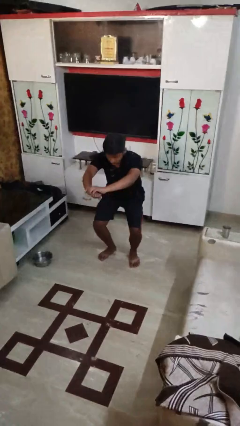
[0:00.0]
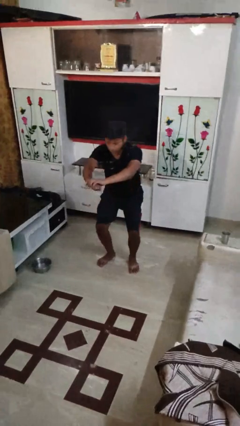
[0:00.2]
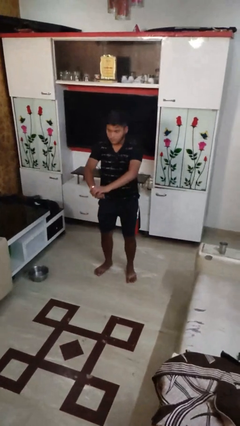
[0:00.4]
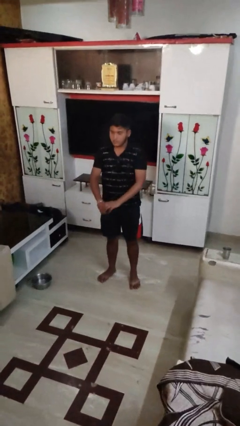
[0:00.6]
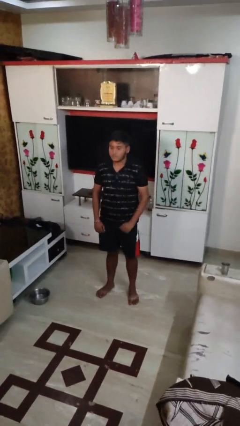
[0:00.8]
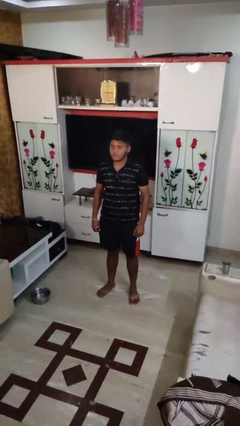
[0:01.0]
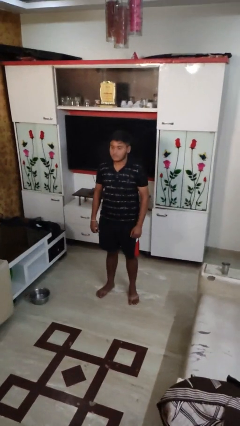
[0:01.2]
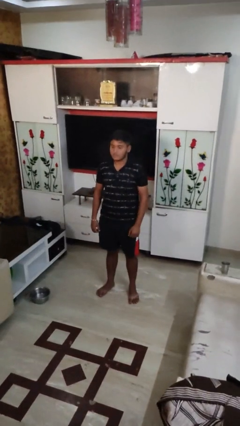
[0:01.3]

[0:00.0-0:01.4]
person stands up

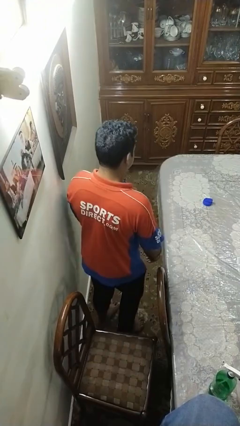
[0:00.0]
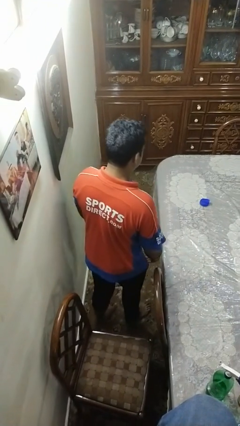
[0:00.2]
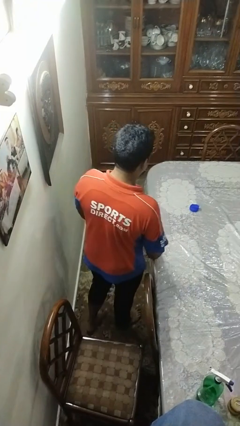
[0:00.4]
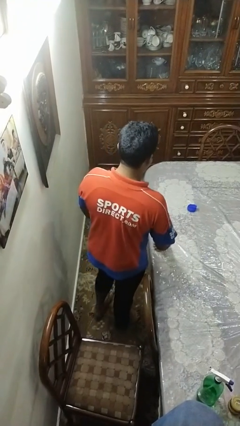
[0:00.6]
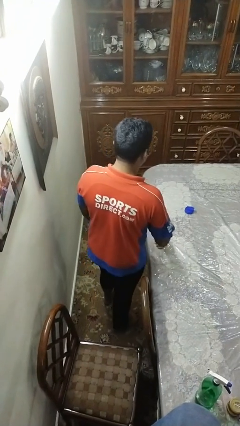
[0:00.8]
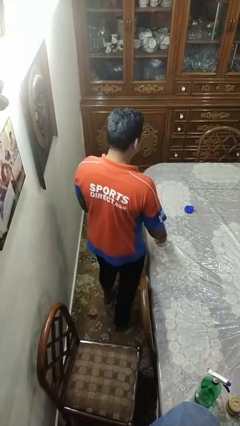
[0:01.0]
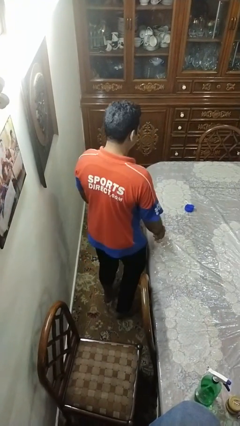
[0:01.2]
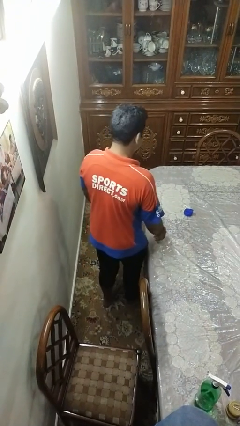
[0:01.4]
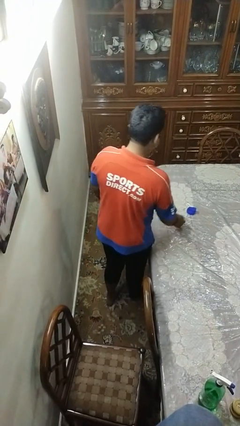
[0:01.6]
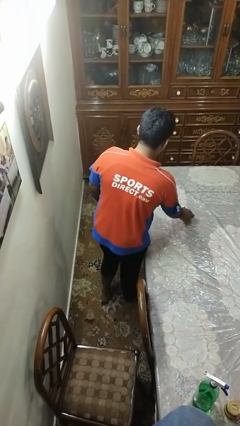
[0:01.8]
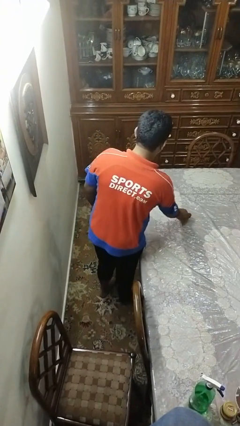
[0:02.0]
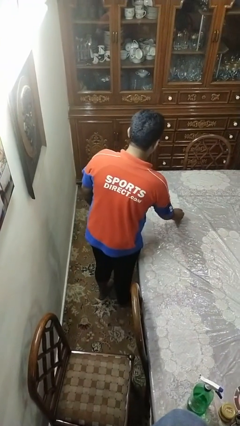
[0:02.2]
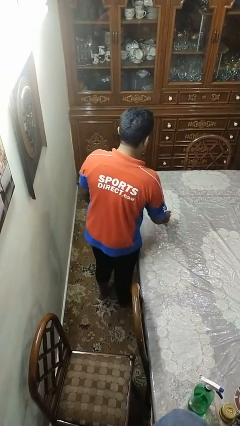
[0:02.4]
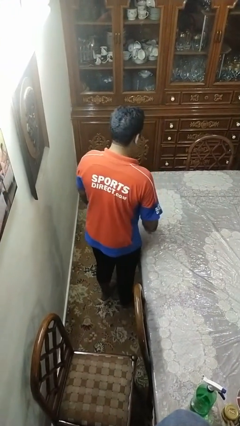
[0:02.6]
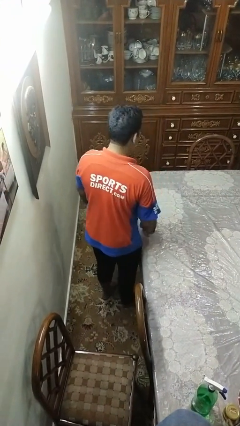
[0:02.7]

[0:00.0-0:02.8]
person picks up object from table

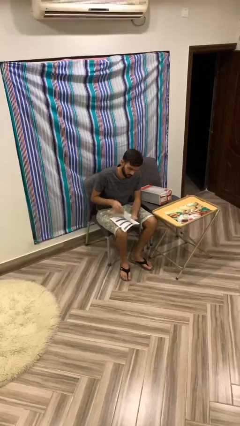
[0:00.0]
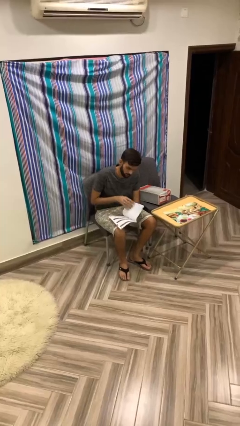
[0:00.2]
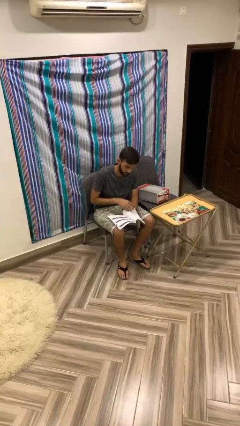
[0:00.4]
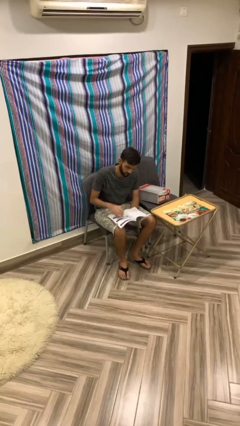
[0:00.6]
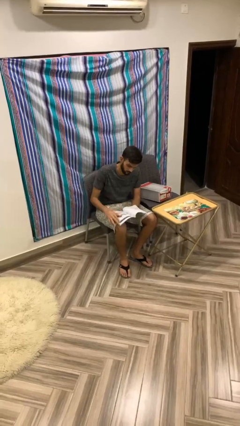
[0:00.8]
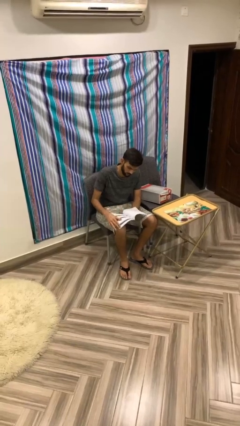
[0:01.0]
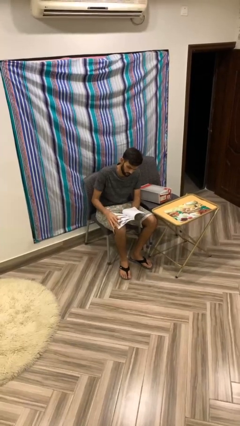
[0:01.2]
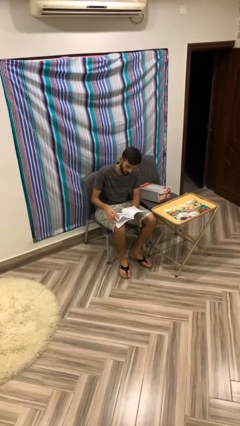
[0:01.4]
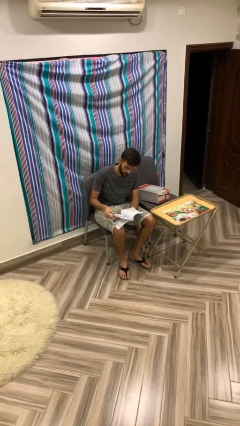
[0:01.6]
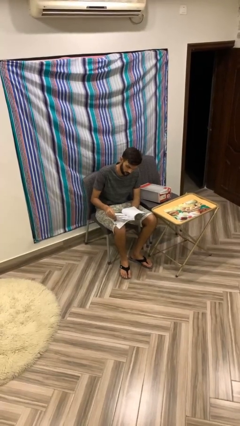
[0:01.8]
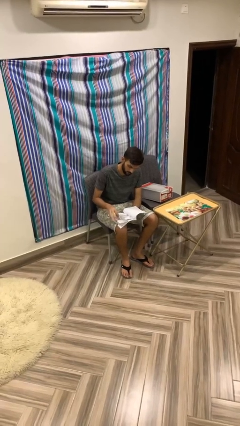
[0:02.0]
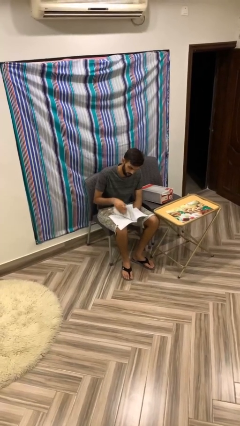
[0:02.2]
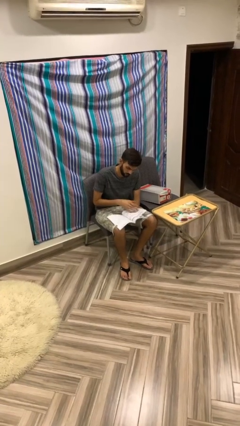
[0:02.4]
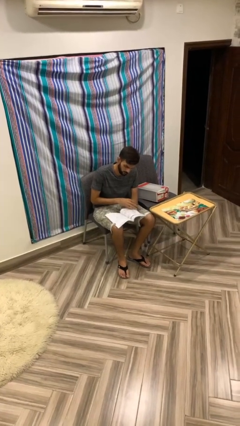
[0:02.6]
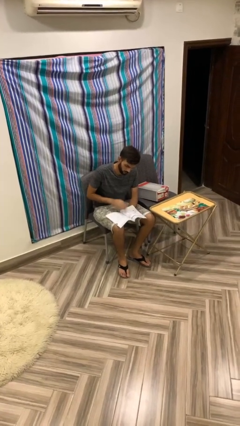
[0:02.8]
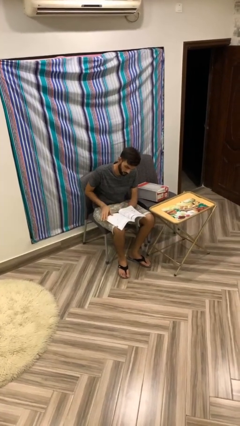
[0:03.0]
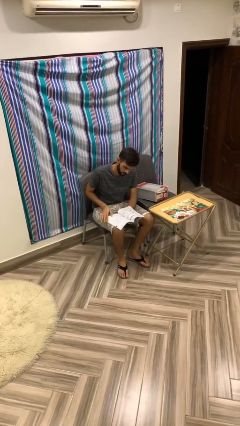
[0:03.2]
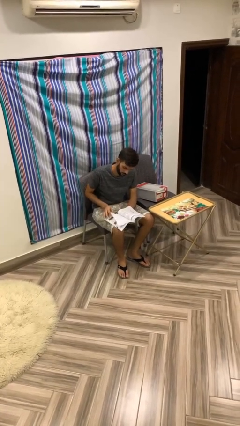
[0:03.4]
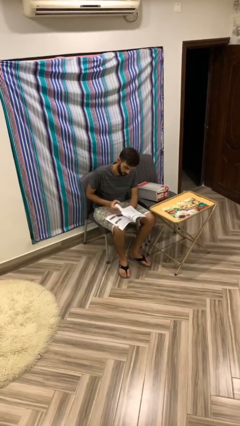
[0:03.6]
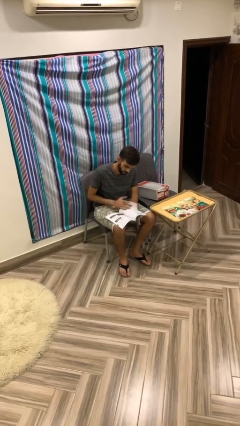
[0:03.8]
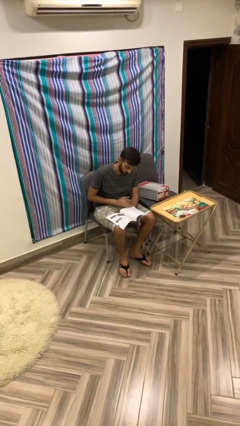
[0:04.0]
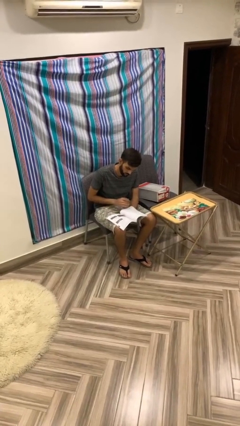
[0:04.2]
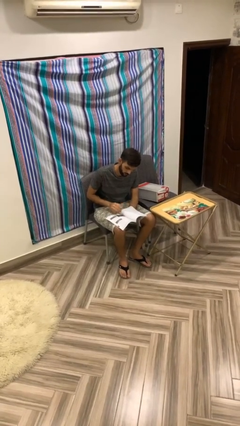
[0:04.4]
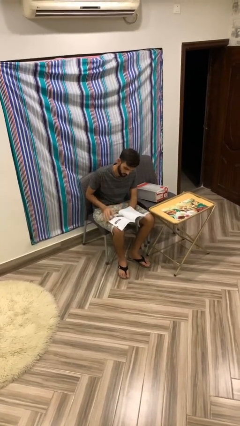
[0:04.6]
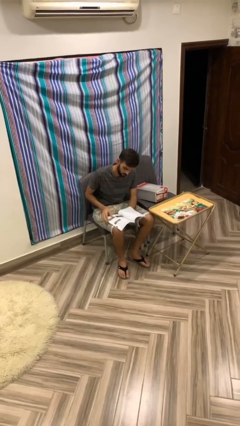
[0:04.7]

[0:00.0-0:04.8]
person reads document

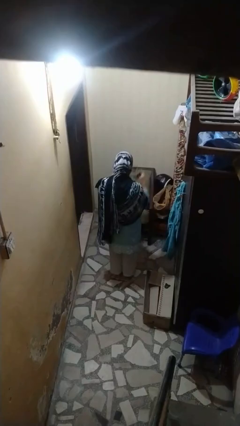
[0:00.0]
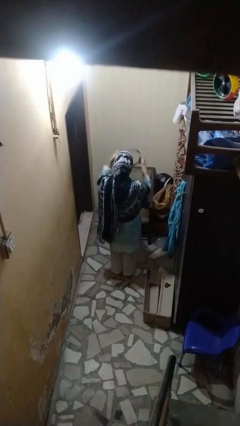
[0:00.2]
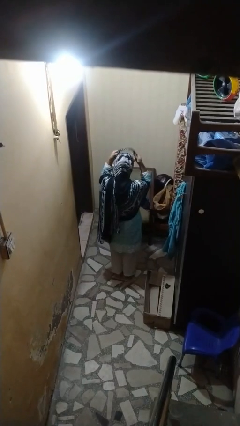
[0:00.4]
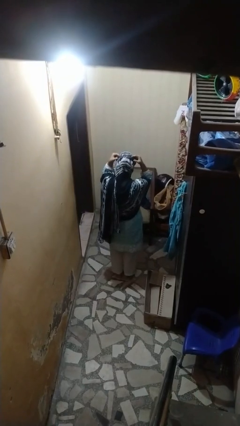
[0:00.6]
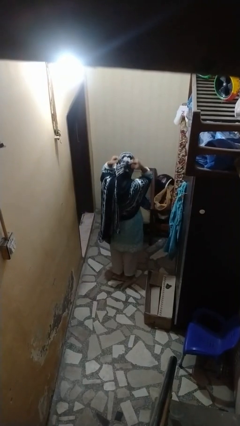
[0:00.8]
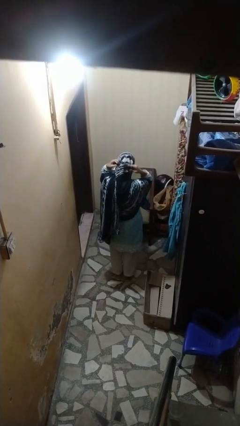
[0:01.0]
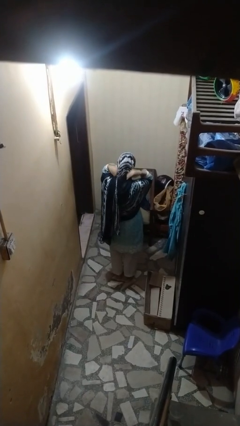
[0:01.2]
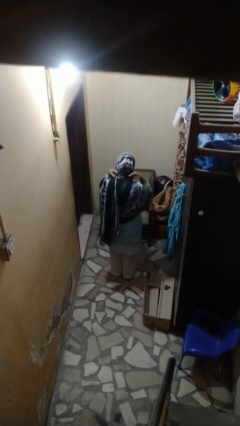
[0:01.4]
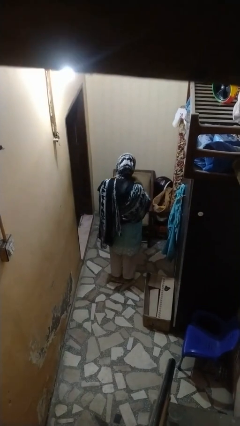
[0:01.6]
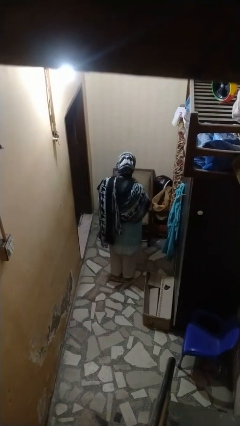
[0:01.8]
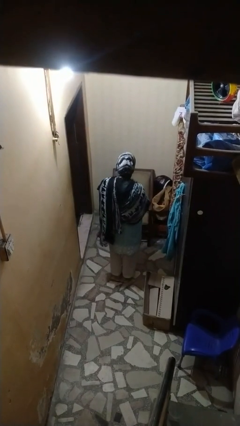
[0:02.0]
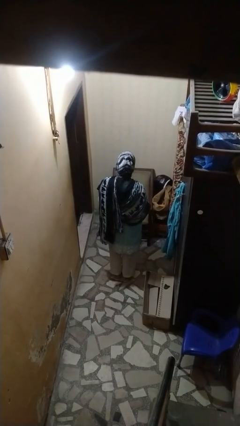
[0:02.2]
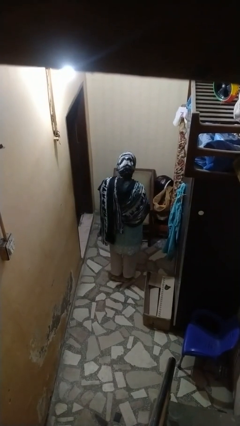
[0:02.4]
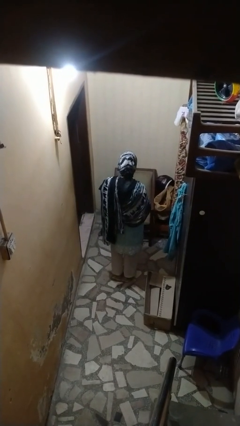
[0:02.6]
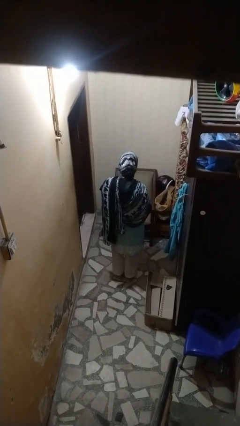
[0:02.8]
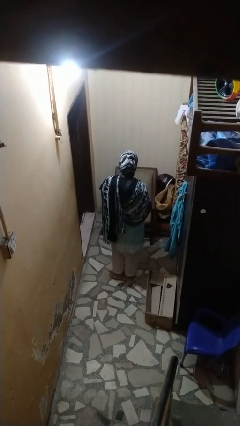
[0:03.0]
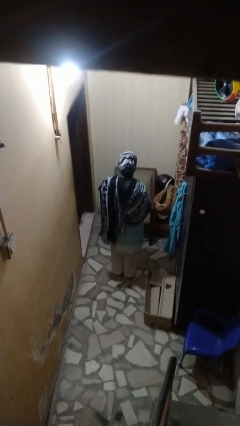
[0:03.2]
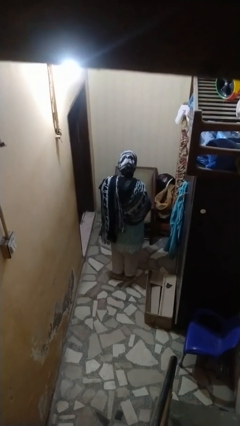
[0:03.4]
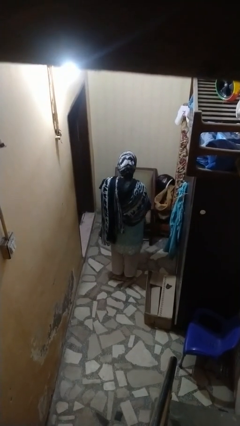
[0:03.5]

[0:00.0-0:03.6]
person puts on necktie

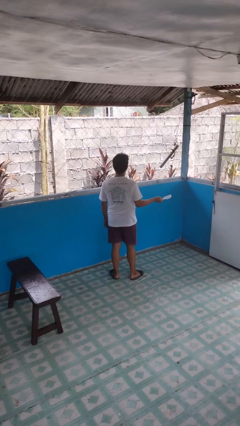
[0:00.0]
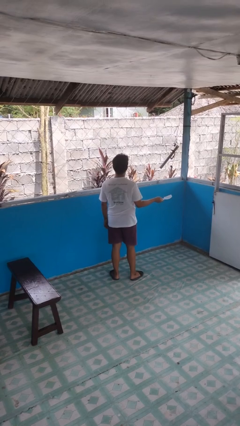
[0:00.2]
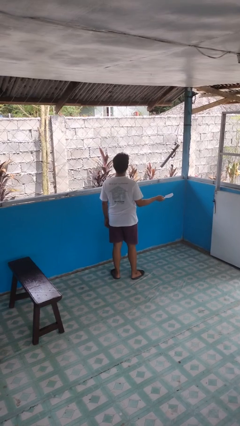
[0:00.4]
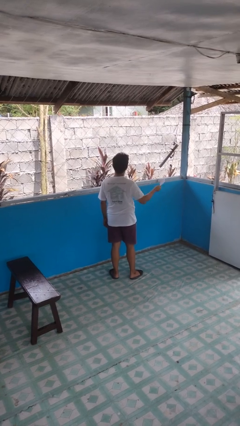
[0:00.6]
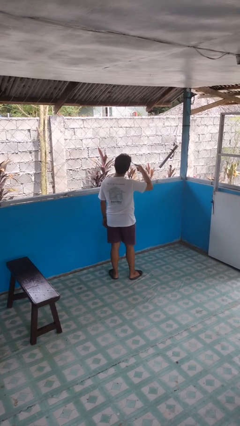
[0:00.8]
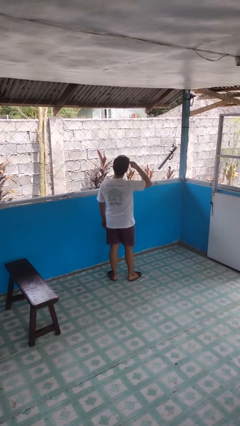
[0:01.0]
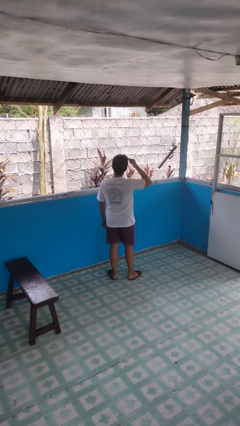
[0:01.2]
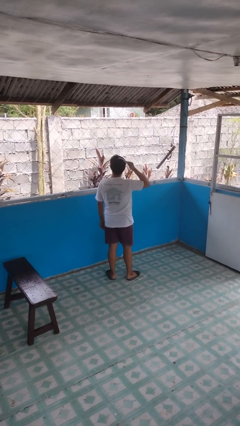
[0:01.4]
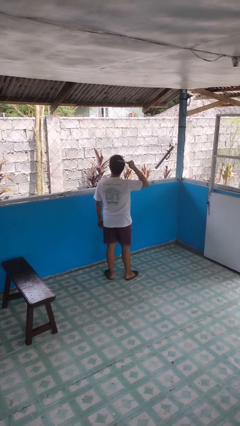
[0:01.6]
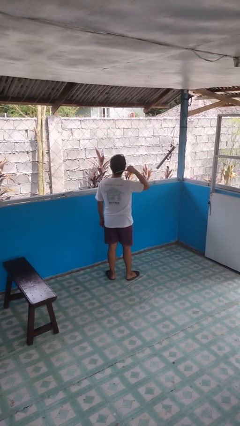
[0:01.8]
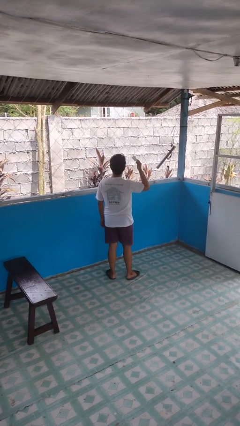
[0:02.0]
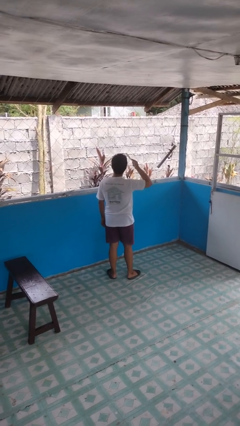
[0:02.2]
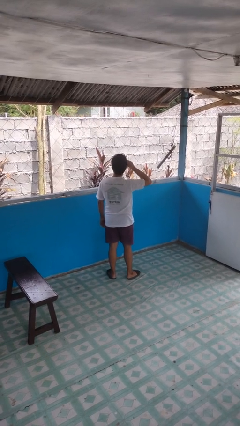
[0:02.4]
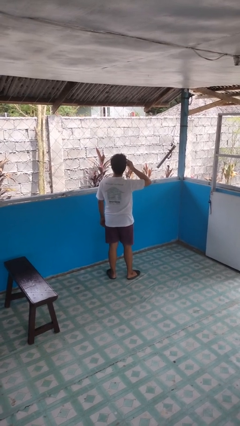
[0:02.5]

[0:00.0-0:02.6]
person brushes hair

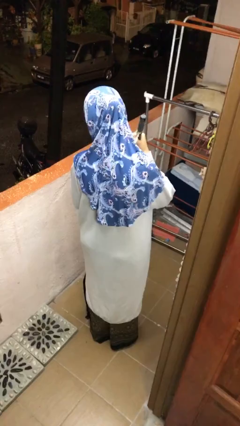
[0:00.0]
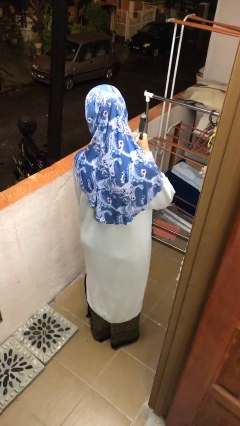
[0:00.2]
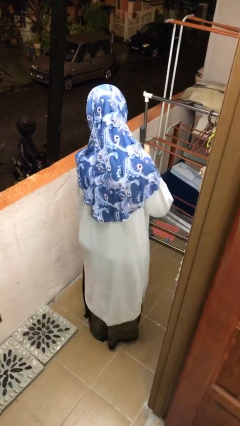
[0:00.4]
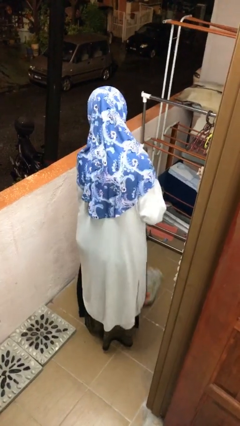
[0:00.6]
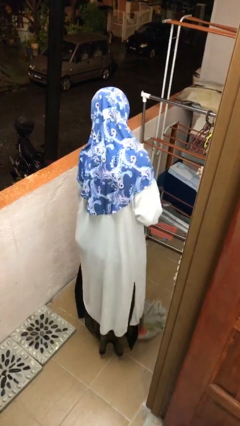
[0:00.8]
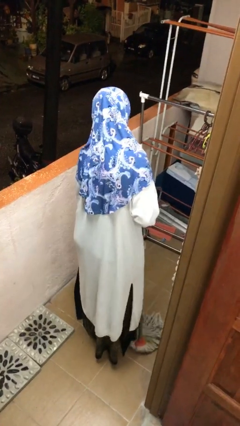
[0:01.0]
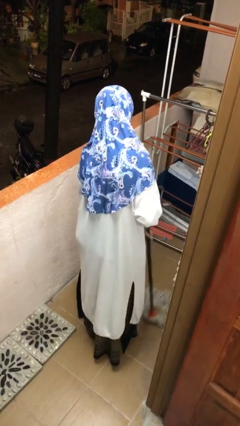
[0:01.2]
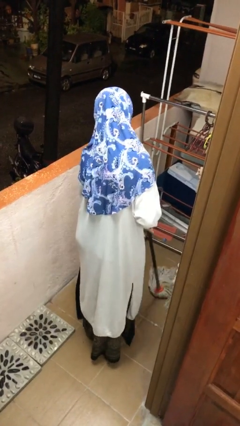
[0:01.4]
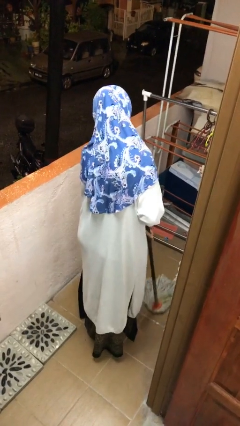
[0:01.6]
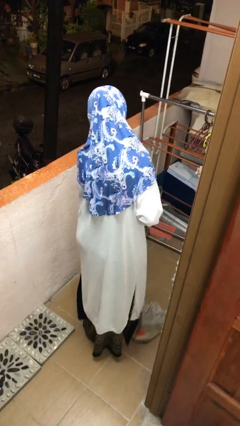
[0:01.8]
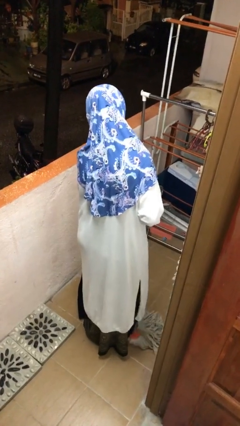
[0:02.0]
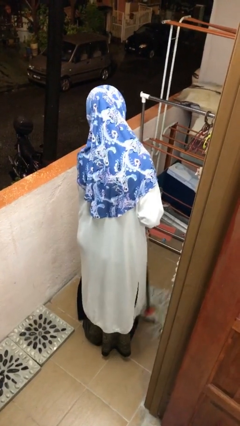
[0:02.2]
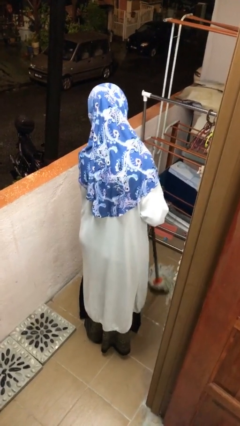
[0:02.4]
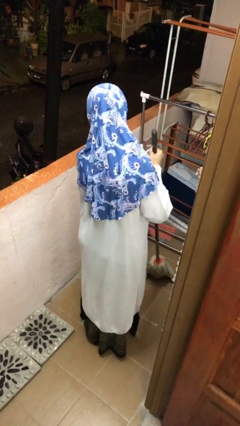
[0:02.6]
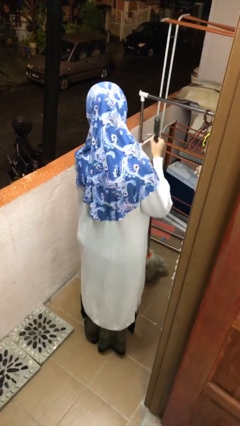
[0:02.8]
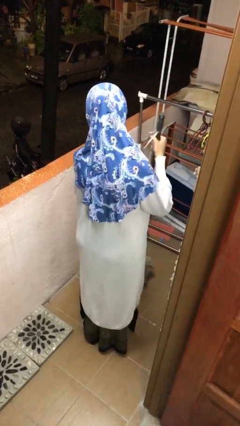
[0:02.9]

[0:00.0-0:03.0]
person mops
